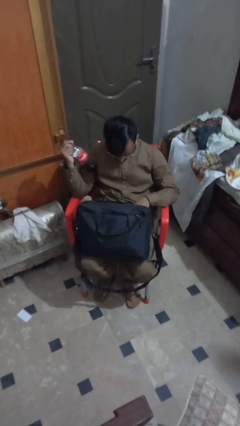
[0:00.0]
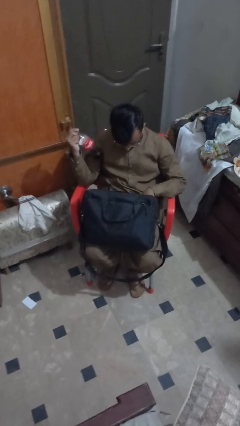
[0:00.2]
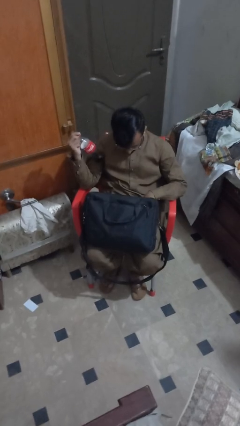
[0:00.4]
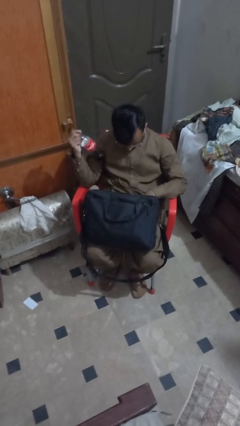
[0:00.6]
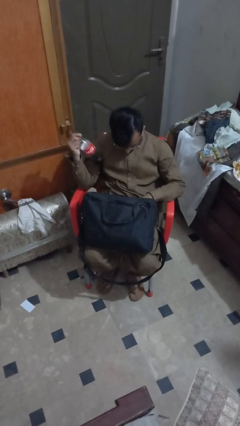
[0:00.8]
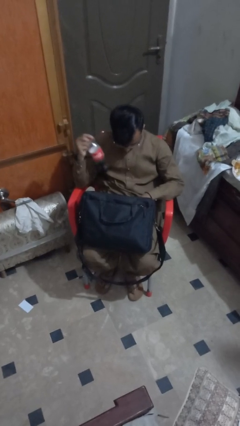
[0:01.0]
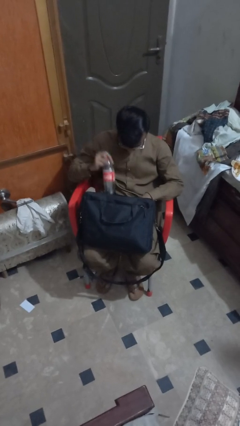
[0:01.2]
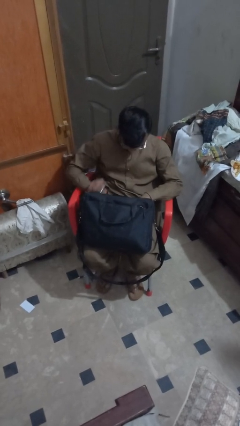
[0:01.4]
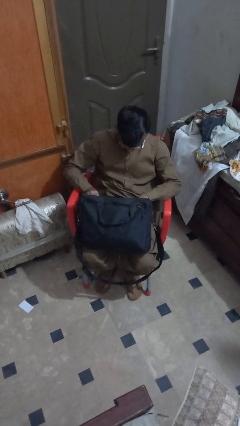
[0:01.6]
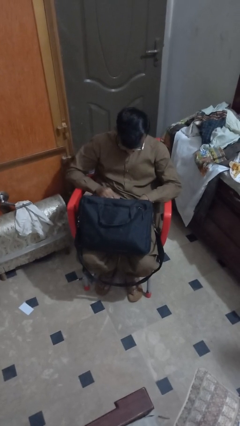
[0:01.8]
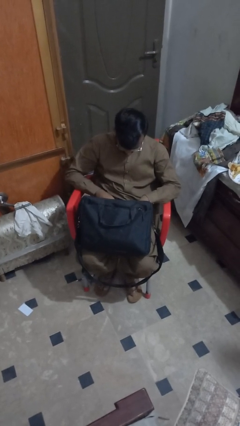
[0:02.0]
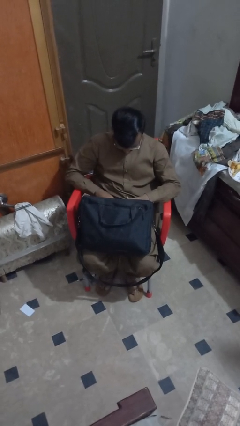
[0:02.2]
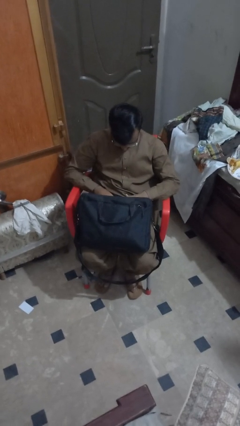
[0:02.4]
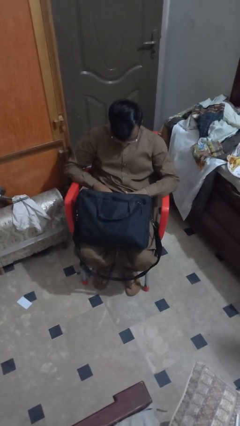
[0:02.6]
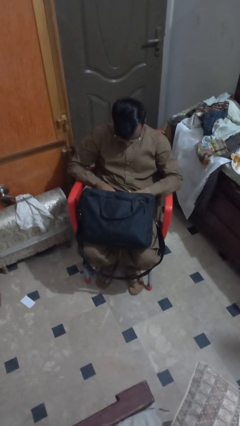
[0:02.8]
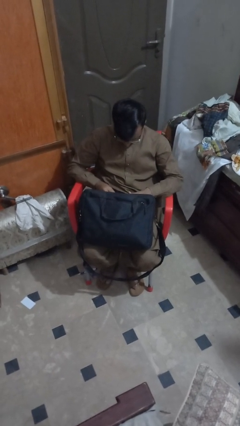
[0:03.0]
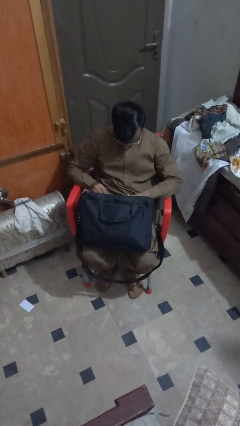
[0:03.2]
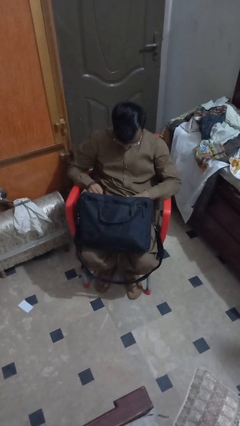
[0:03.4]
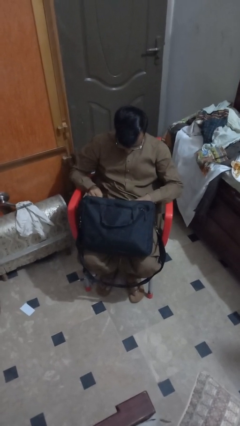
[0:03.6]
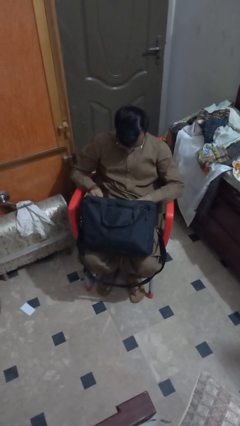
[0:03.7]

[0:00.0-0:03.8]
person puts object into bag

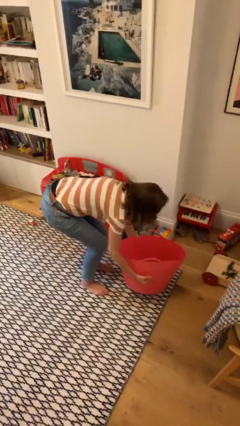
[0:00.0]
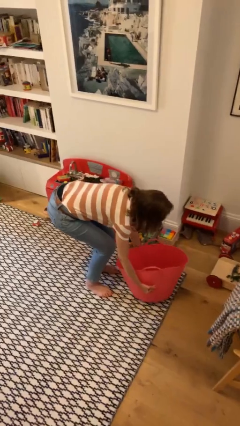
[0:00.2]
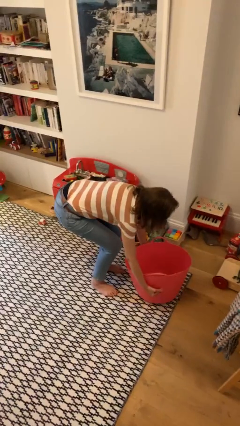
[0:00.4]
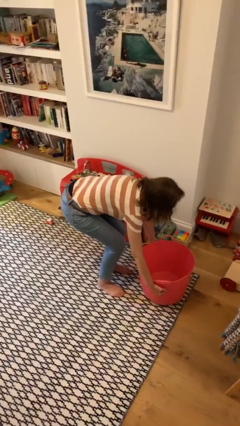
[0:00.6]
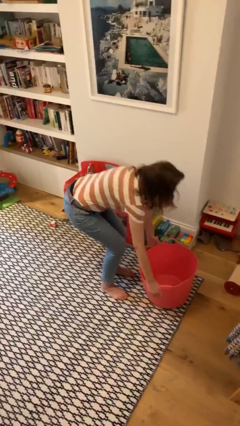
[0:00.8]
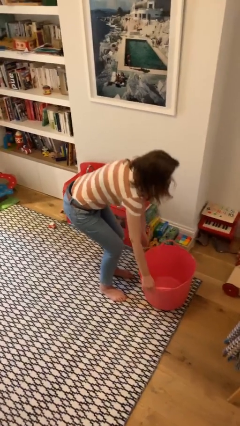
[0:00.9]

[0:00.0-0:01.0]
person puts down object on floor

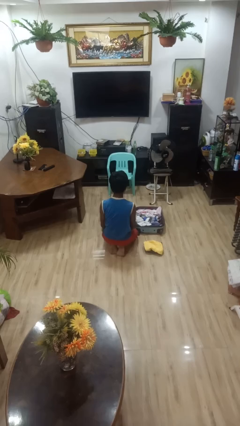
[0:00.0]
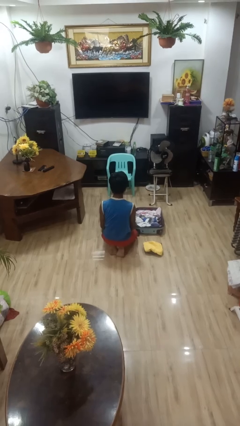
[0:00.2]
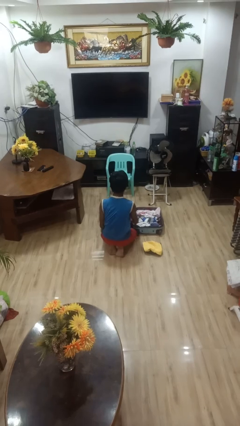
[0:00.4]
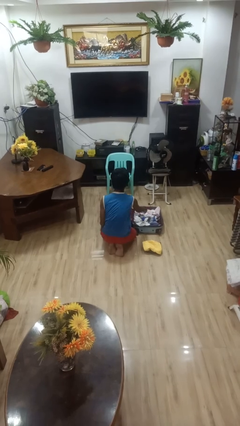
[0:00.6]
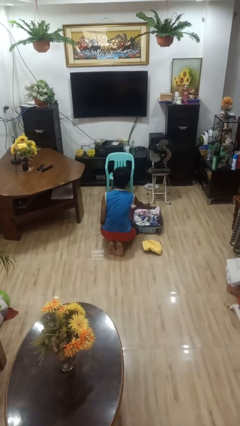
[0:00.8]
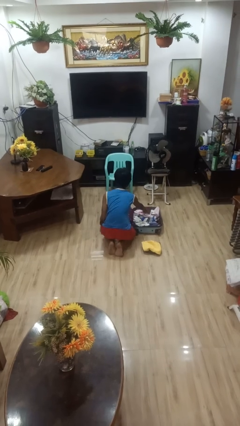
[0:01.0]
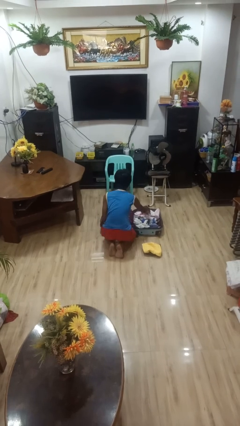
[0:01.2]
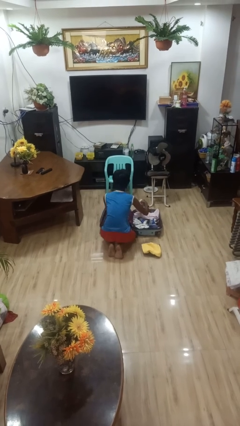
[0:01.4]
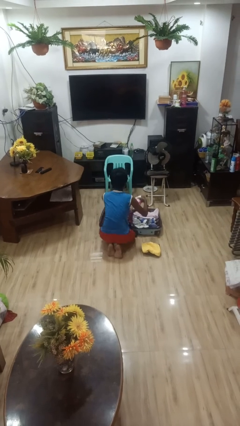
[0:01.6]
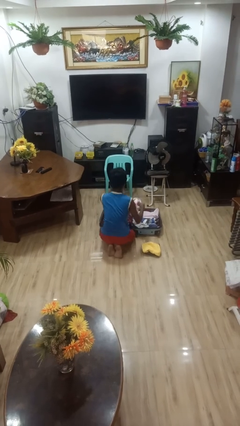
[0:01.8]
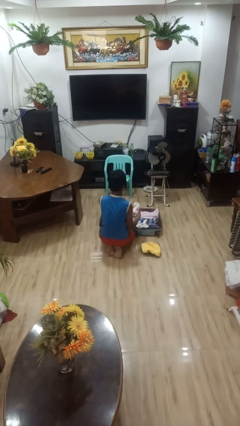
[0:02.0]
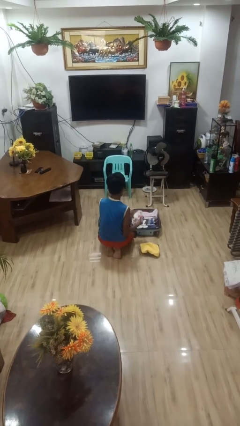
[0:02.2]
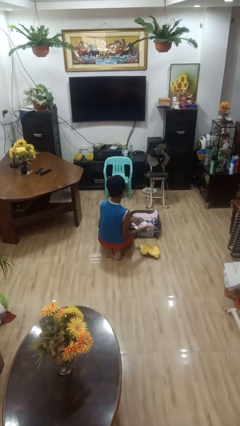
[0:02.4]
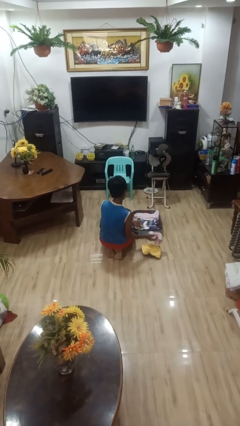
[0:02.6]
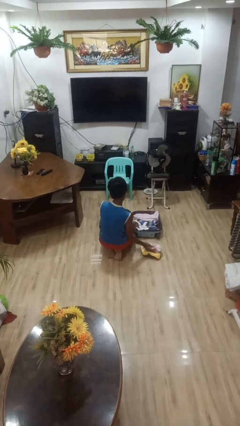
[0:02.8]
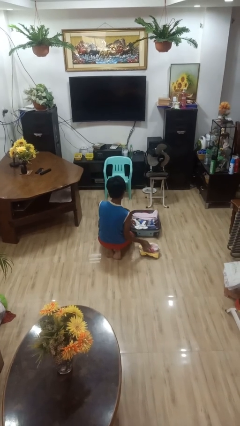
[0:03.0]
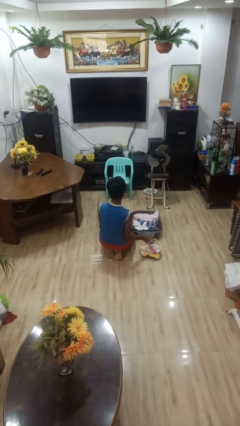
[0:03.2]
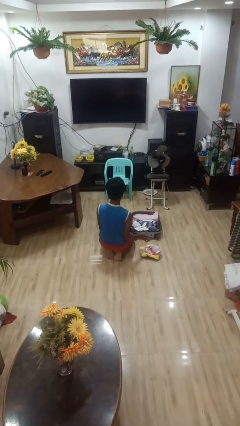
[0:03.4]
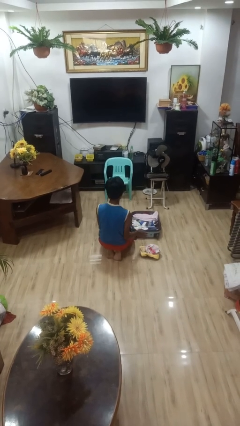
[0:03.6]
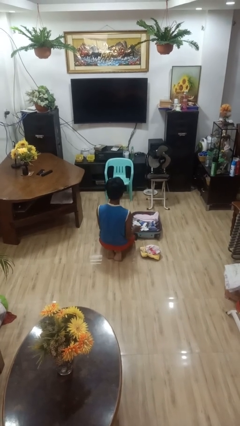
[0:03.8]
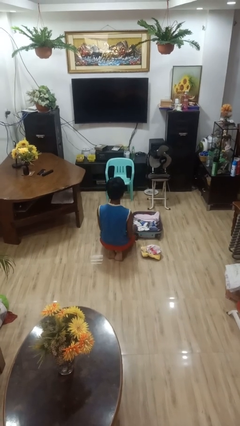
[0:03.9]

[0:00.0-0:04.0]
person unloads clothes from suitcase

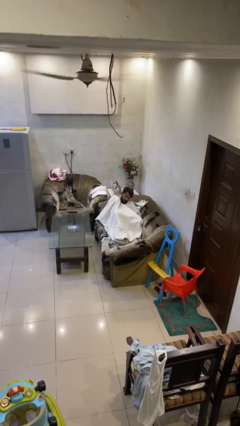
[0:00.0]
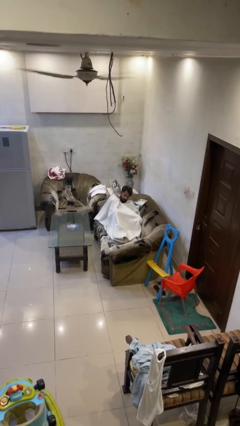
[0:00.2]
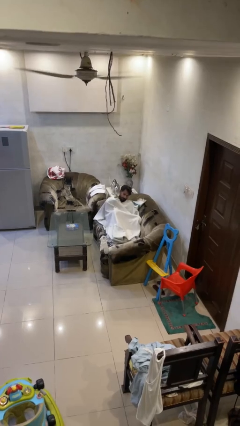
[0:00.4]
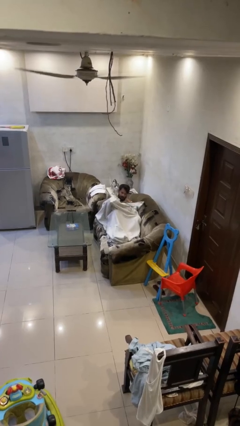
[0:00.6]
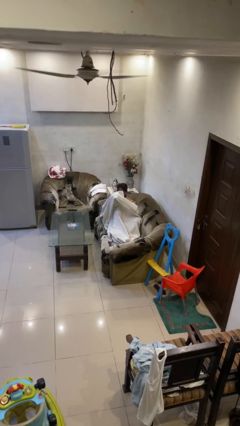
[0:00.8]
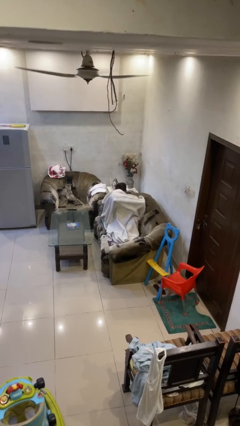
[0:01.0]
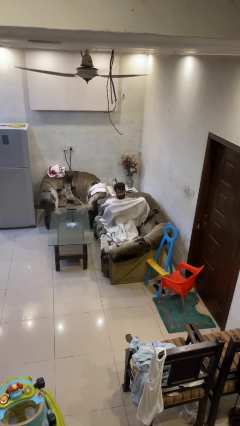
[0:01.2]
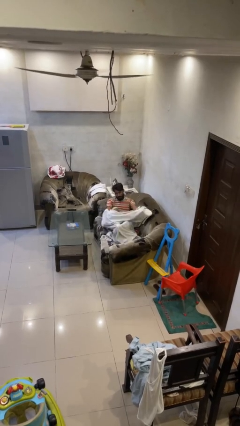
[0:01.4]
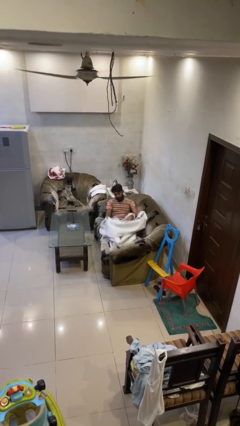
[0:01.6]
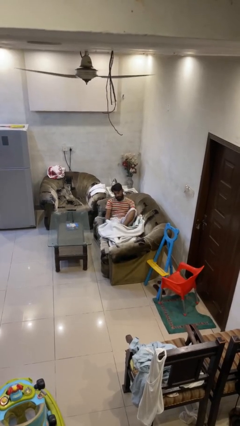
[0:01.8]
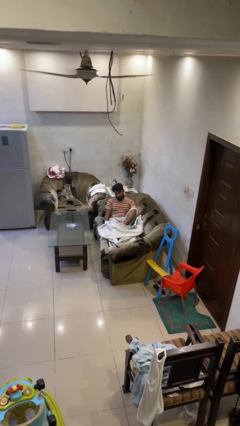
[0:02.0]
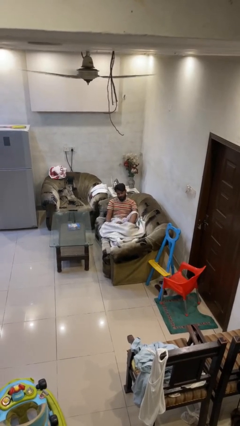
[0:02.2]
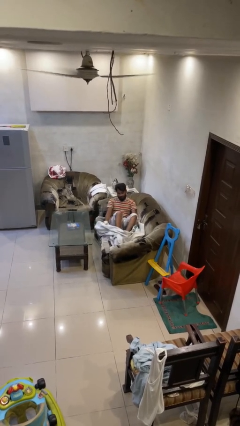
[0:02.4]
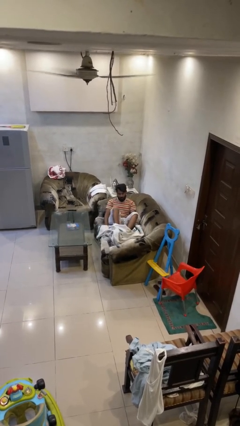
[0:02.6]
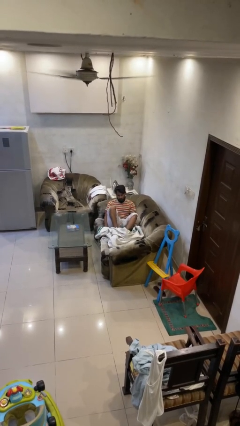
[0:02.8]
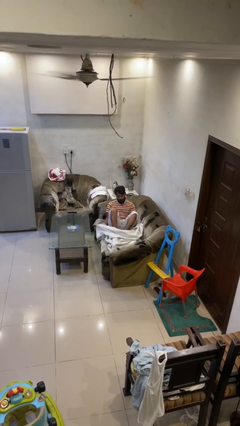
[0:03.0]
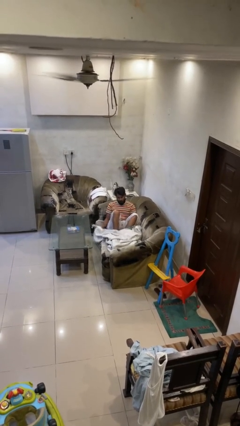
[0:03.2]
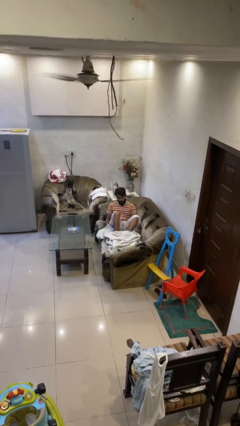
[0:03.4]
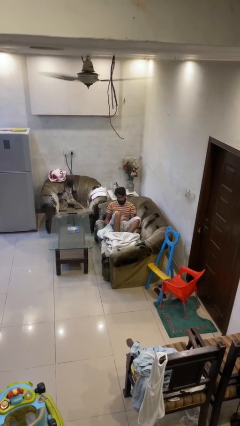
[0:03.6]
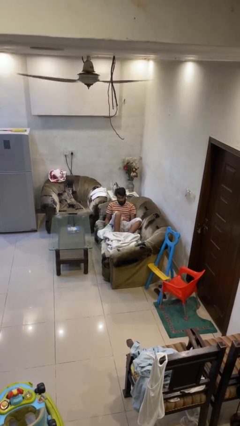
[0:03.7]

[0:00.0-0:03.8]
person uncovers with blanket

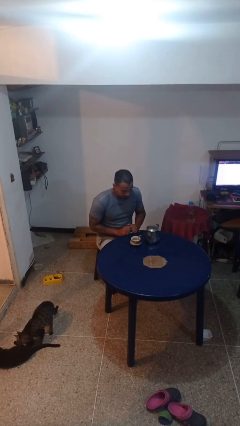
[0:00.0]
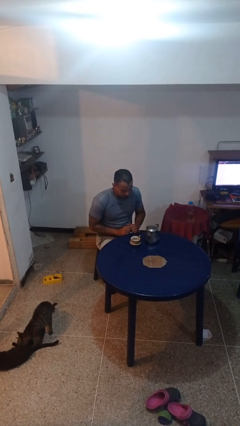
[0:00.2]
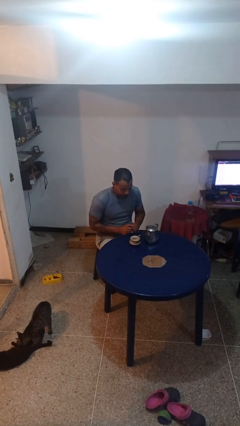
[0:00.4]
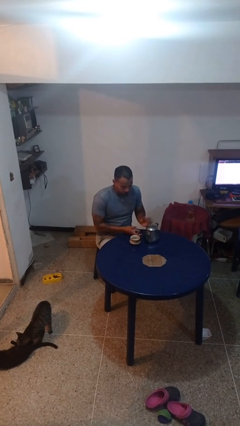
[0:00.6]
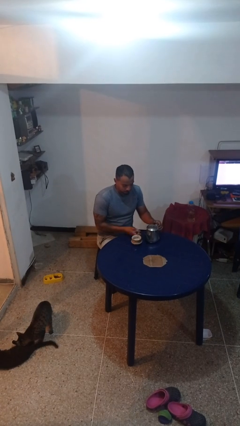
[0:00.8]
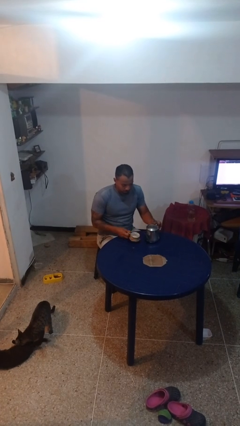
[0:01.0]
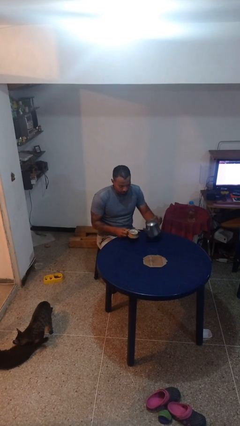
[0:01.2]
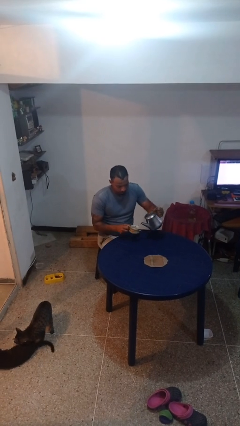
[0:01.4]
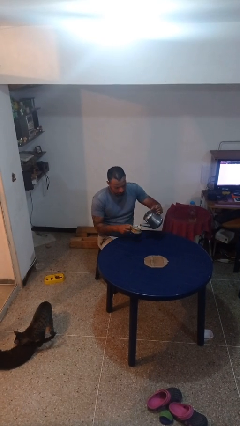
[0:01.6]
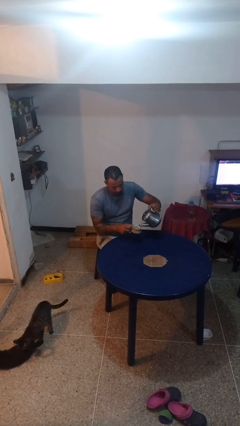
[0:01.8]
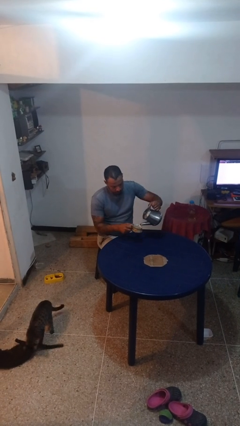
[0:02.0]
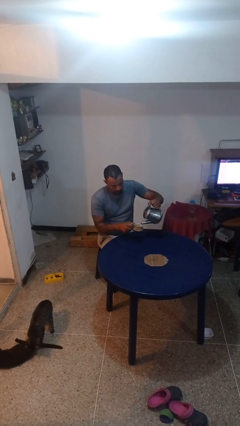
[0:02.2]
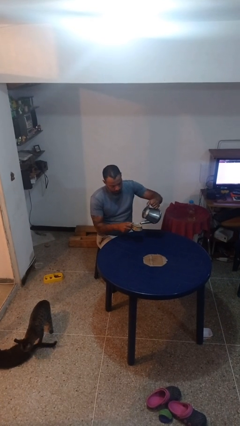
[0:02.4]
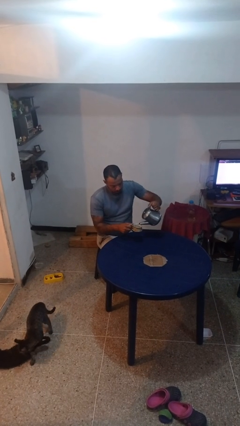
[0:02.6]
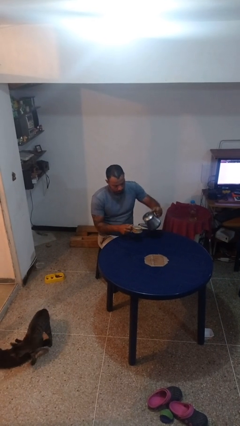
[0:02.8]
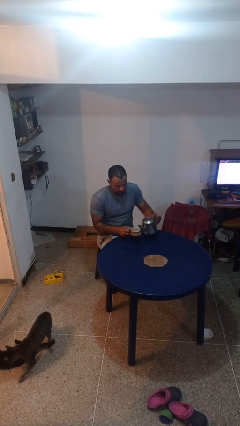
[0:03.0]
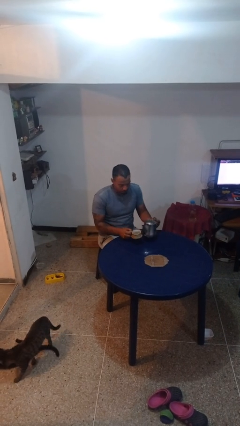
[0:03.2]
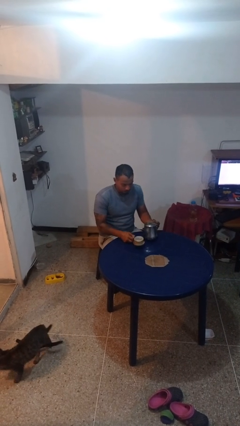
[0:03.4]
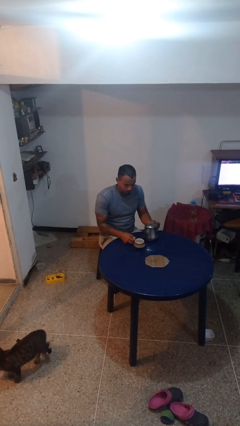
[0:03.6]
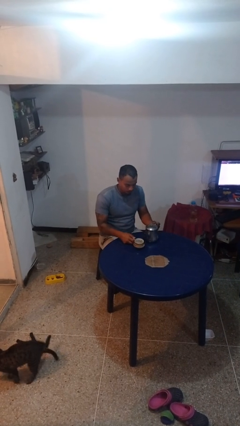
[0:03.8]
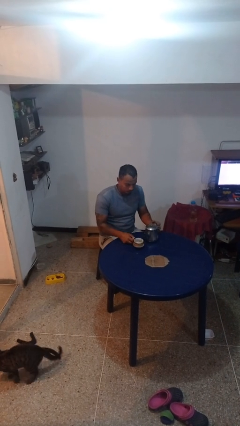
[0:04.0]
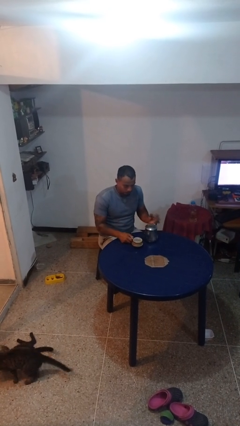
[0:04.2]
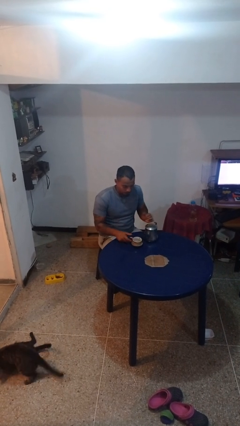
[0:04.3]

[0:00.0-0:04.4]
person pours coffee into mug

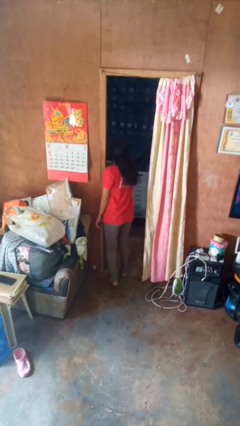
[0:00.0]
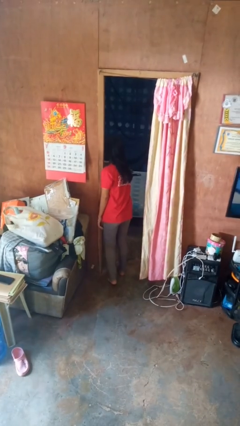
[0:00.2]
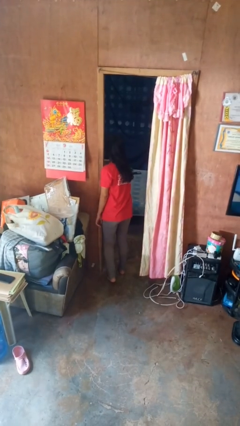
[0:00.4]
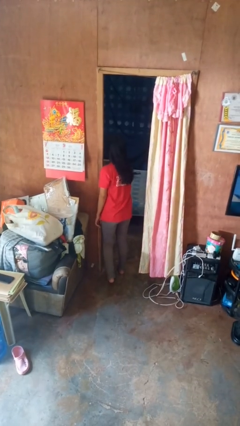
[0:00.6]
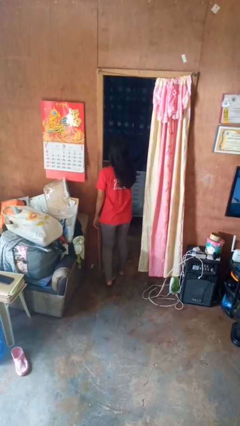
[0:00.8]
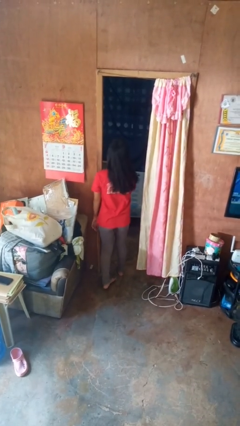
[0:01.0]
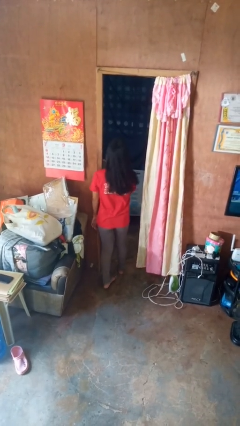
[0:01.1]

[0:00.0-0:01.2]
person bumps into wall
